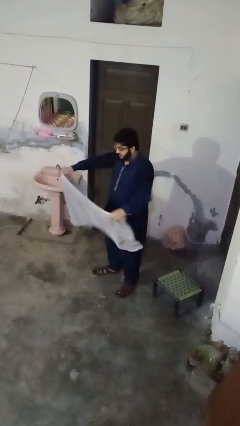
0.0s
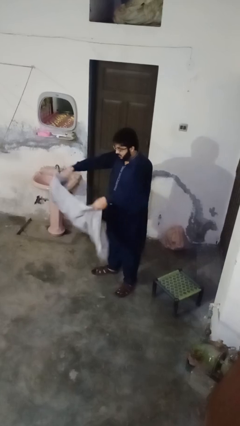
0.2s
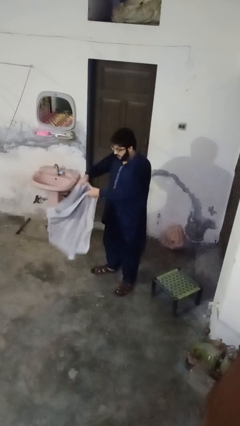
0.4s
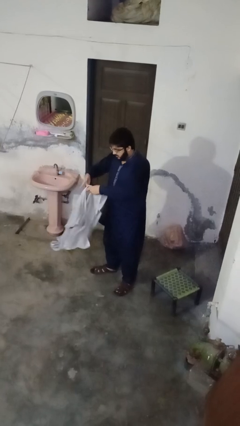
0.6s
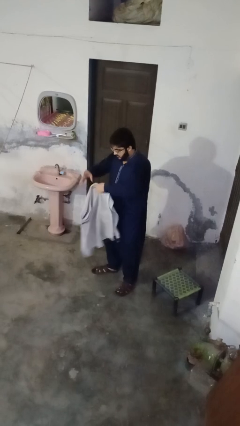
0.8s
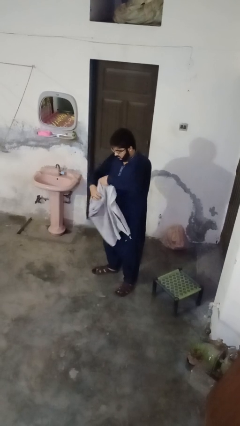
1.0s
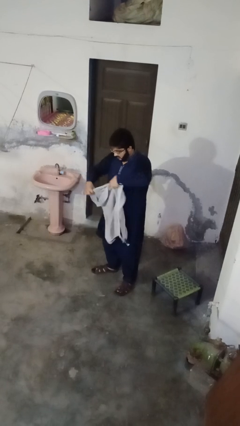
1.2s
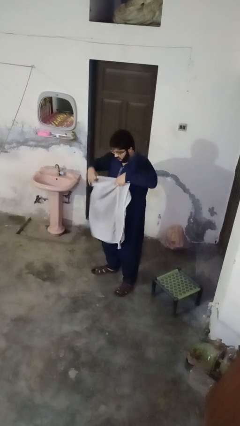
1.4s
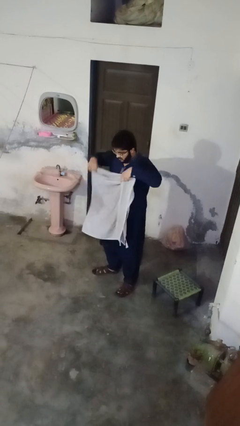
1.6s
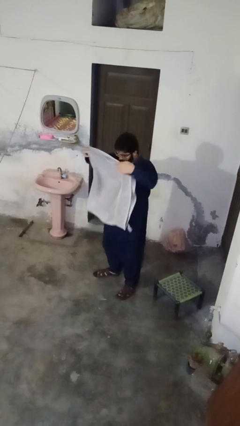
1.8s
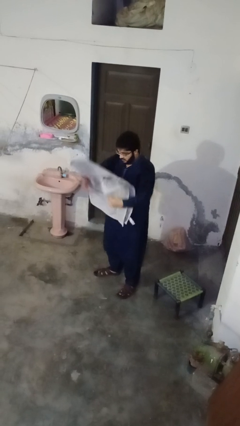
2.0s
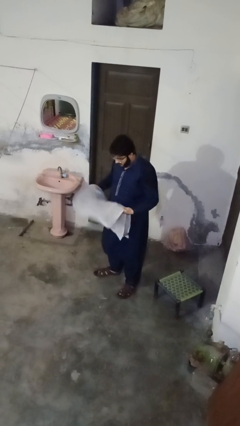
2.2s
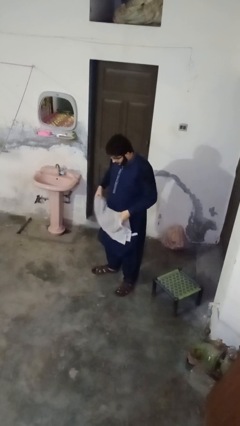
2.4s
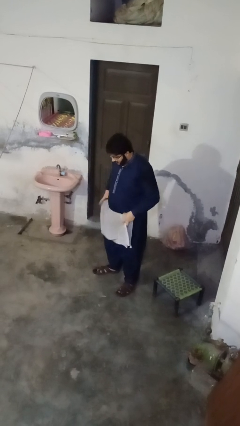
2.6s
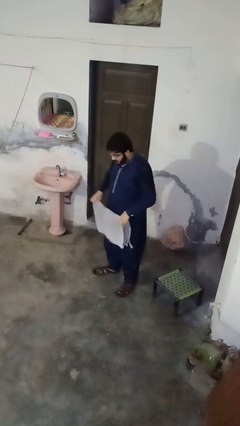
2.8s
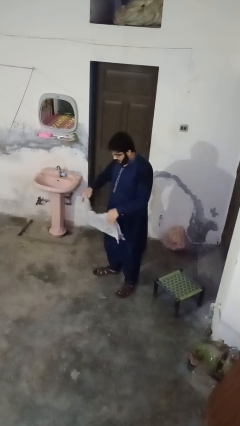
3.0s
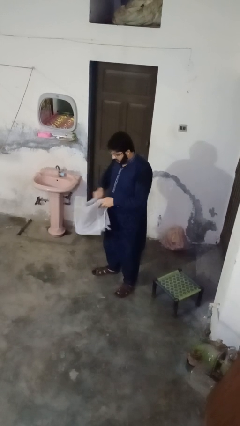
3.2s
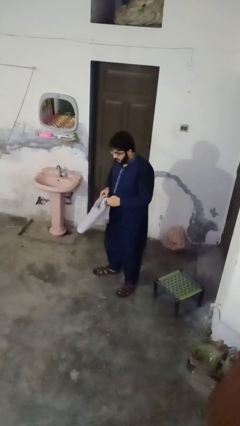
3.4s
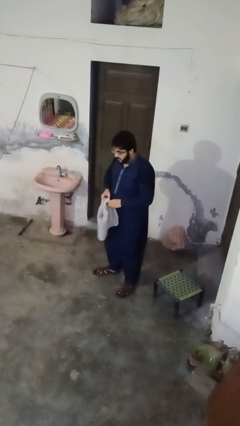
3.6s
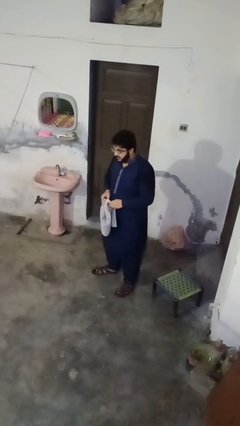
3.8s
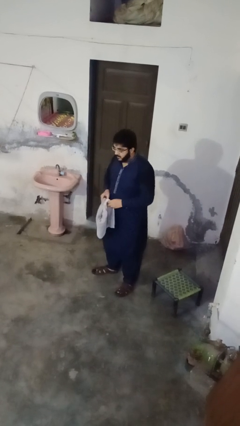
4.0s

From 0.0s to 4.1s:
person folds towel

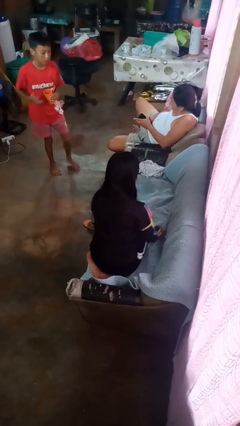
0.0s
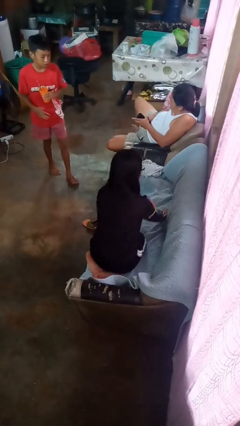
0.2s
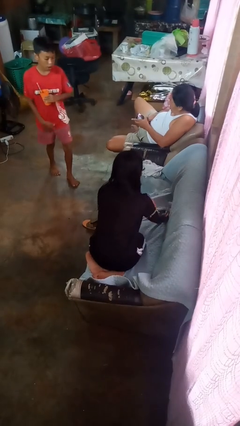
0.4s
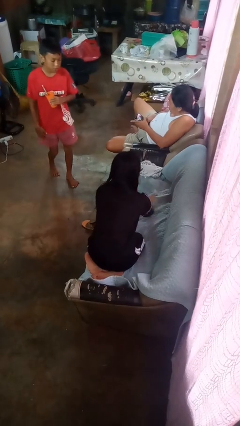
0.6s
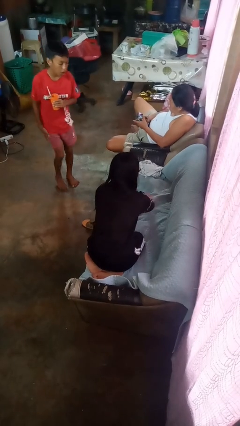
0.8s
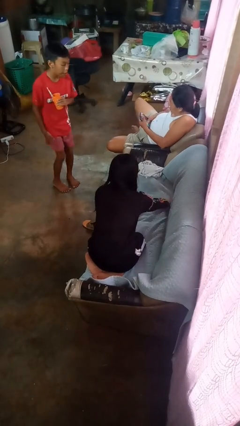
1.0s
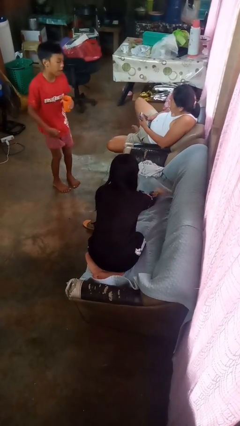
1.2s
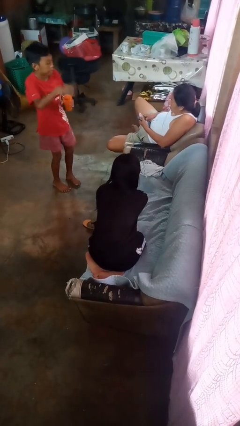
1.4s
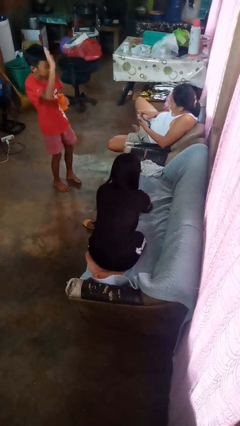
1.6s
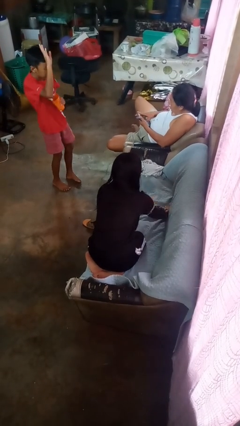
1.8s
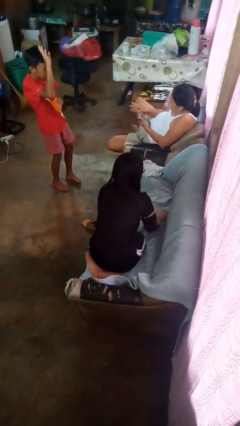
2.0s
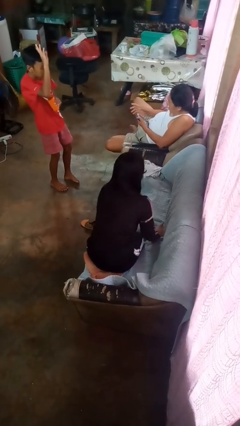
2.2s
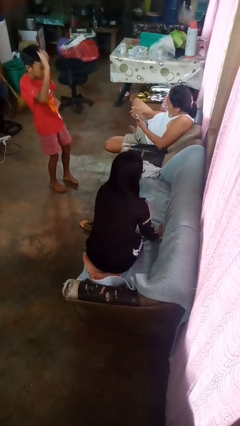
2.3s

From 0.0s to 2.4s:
person searches in couch

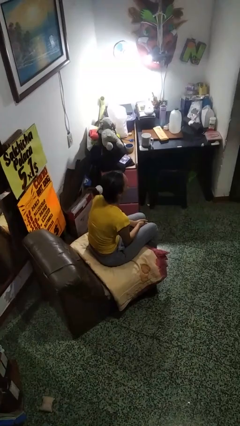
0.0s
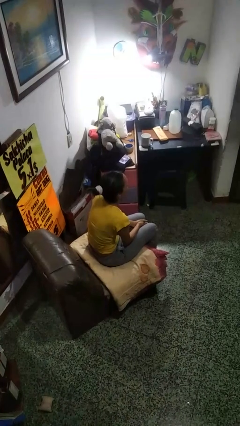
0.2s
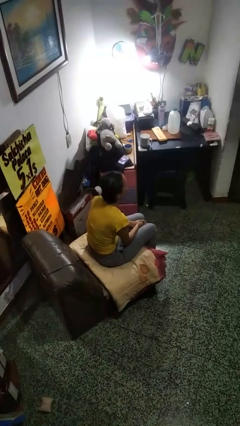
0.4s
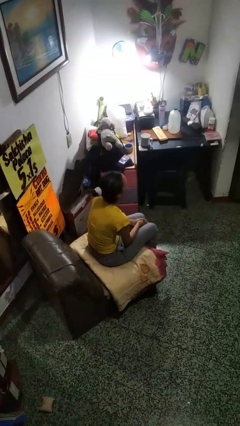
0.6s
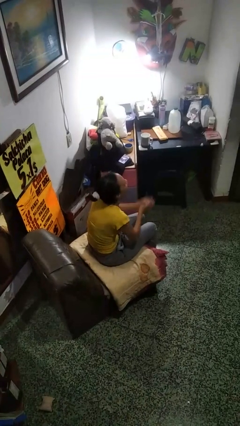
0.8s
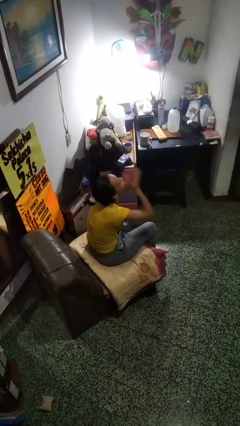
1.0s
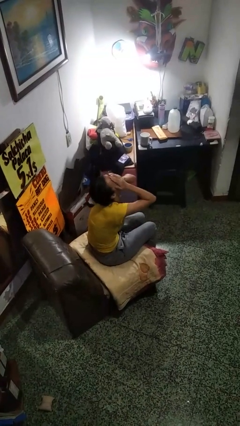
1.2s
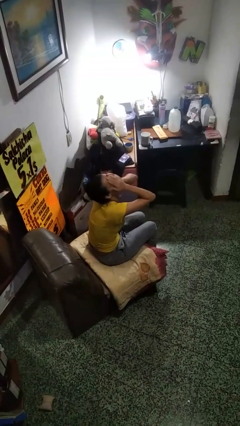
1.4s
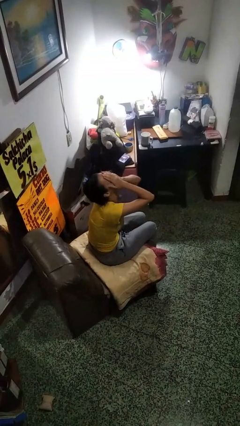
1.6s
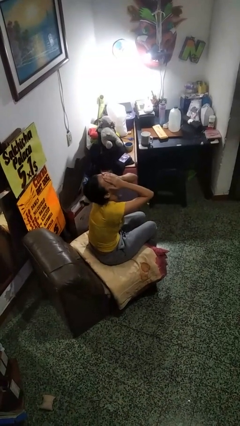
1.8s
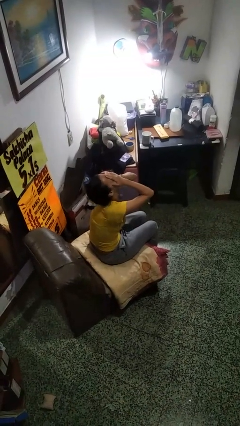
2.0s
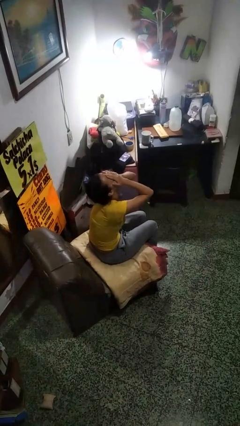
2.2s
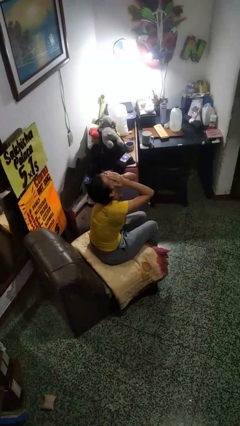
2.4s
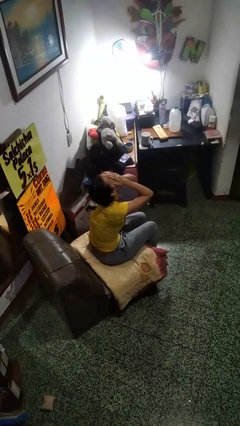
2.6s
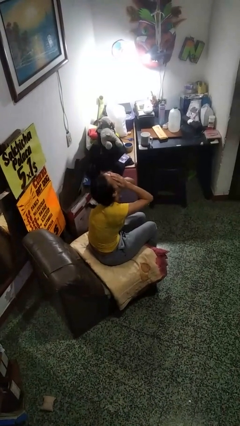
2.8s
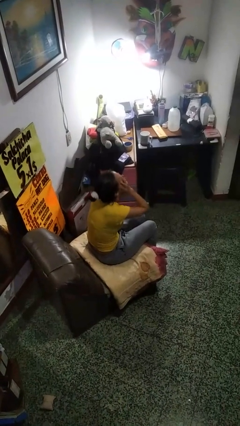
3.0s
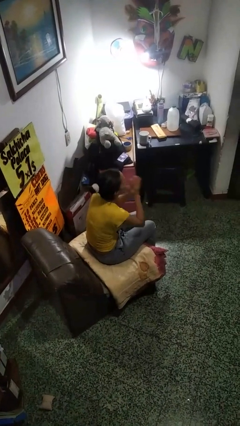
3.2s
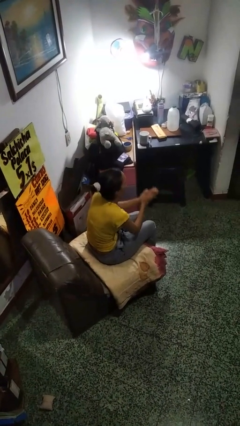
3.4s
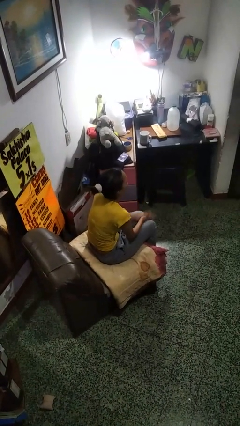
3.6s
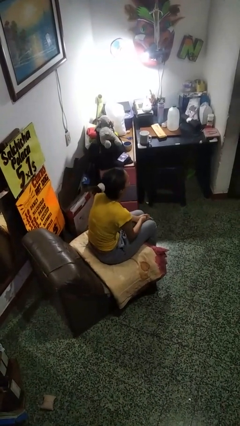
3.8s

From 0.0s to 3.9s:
person covers face with hands

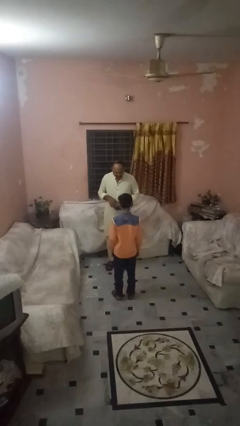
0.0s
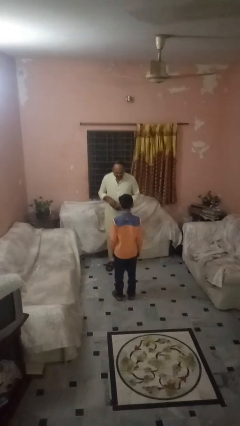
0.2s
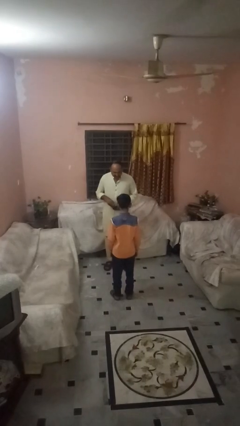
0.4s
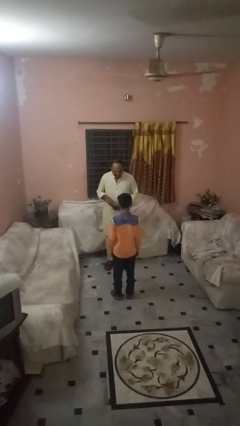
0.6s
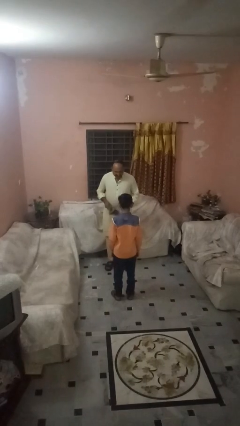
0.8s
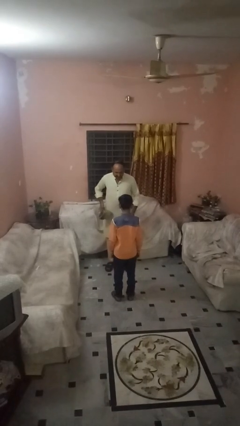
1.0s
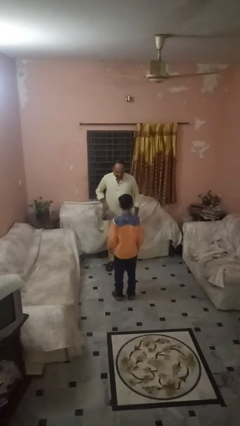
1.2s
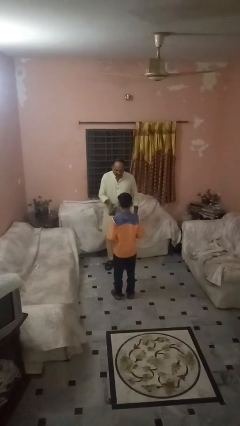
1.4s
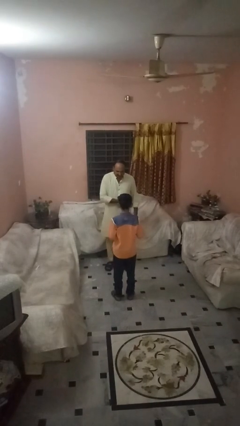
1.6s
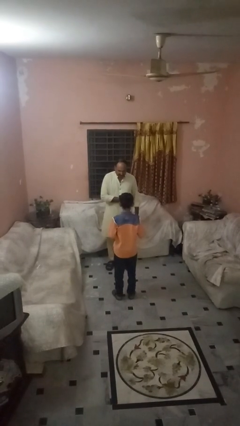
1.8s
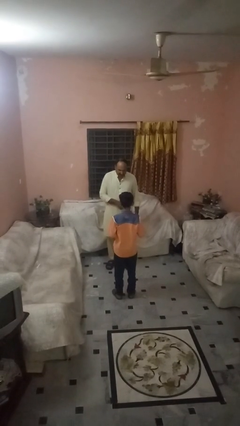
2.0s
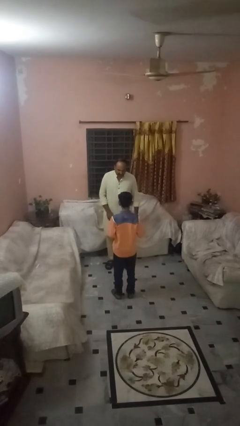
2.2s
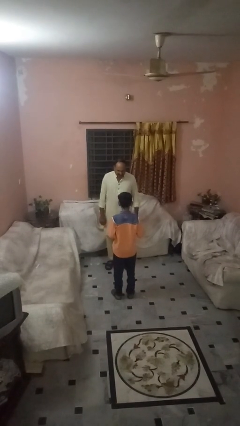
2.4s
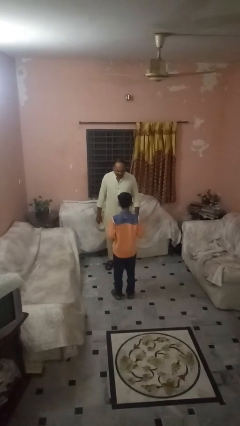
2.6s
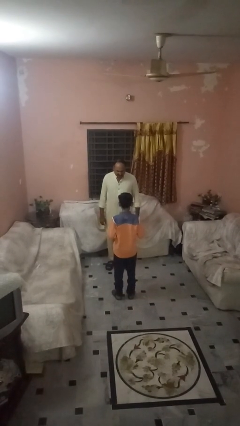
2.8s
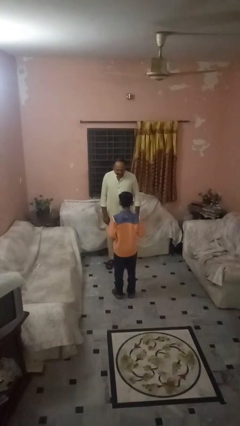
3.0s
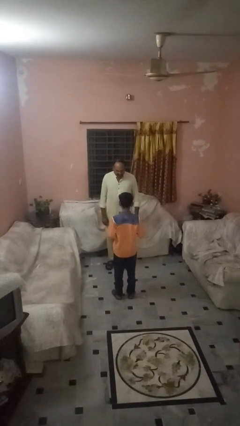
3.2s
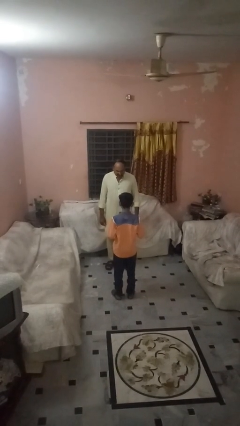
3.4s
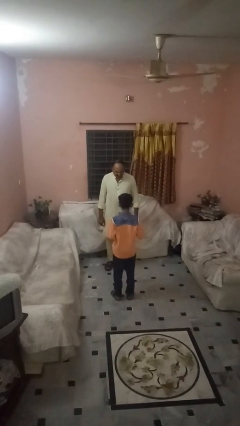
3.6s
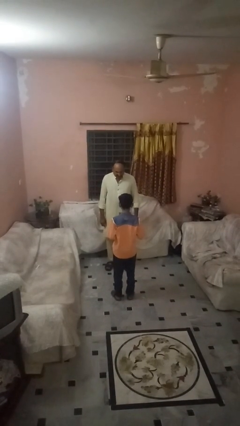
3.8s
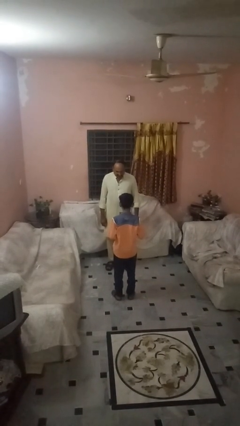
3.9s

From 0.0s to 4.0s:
person throws object to person

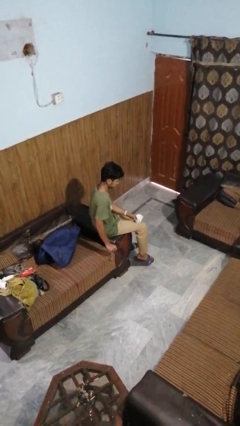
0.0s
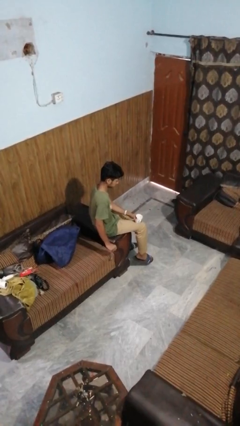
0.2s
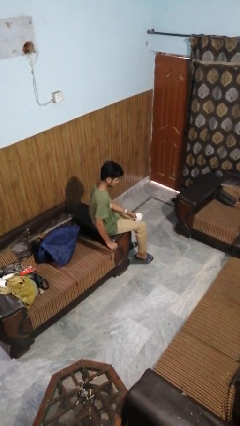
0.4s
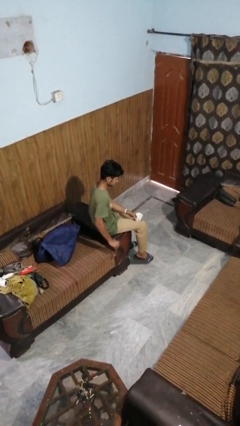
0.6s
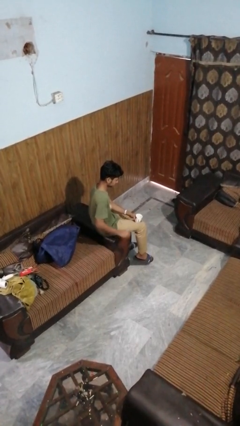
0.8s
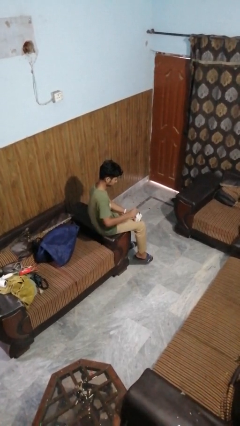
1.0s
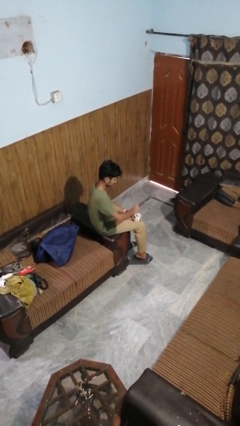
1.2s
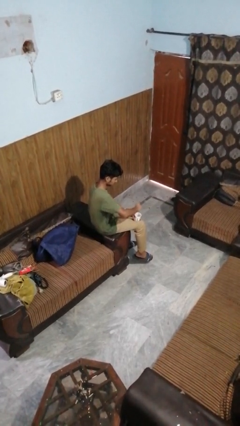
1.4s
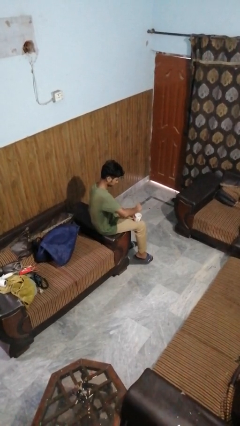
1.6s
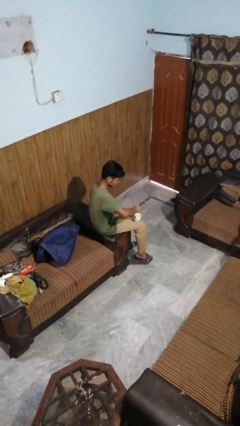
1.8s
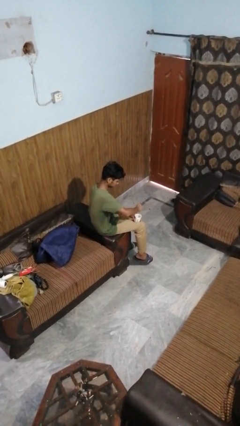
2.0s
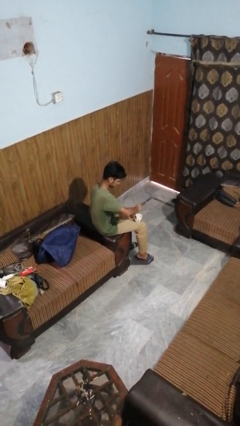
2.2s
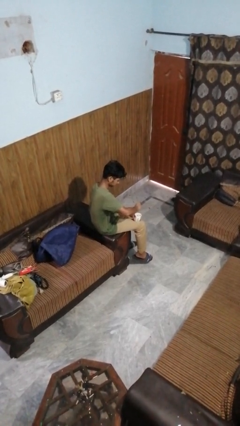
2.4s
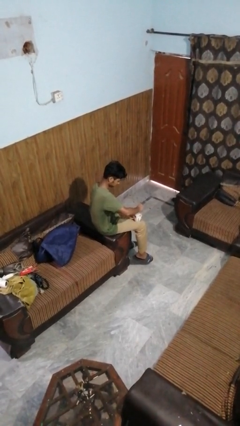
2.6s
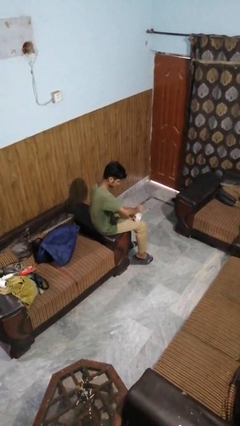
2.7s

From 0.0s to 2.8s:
person stirs mug

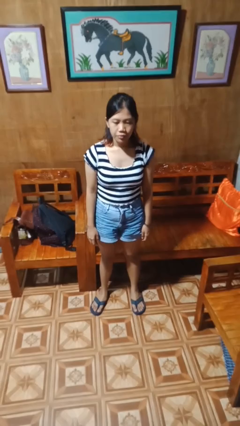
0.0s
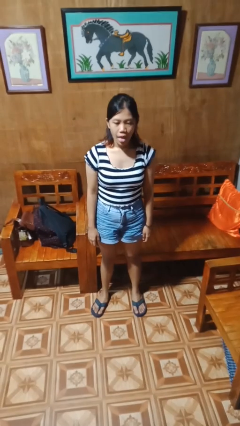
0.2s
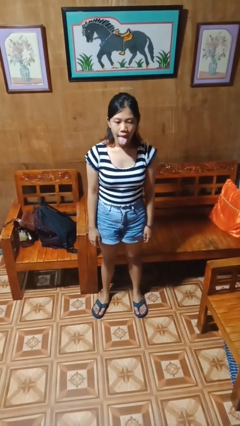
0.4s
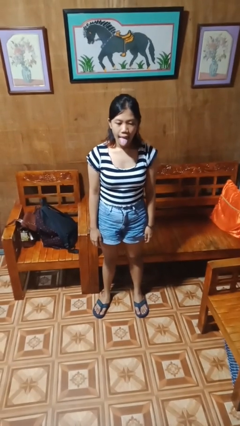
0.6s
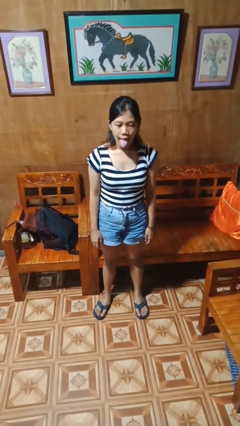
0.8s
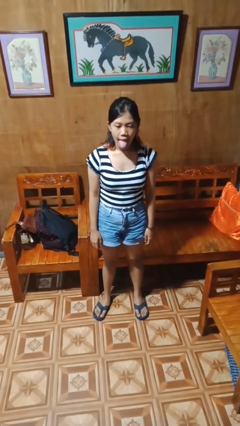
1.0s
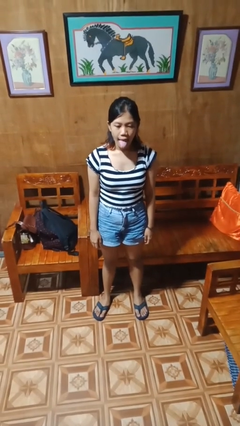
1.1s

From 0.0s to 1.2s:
person sticks out tongue
